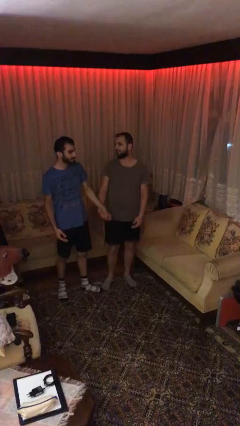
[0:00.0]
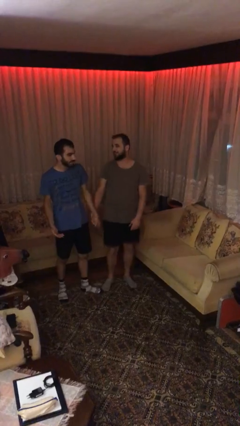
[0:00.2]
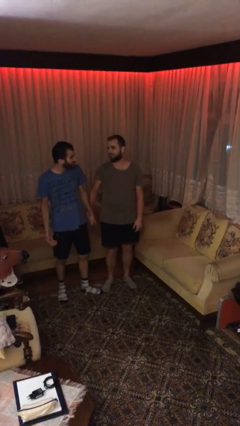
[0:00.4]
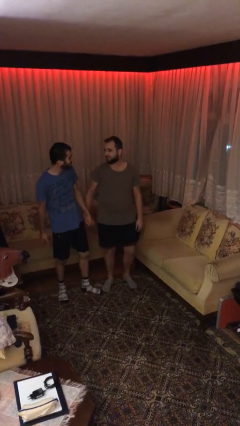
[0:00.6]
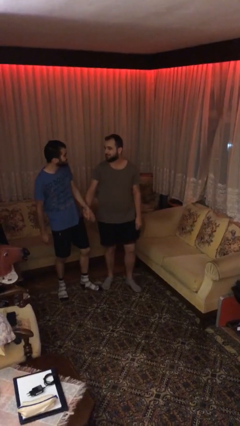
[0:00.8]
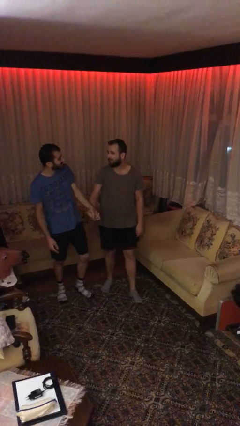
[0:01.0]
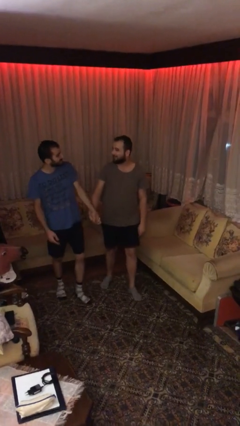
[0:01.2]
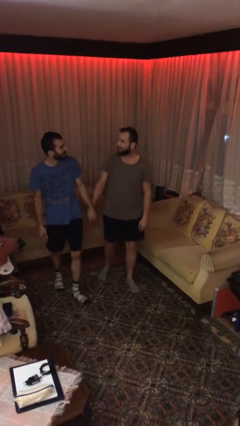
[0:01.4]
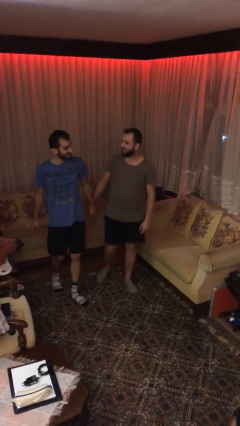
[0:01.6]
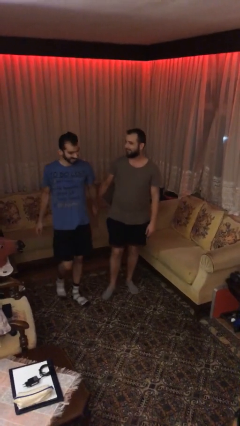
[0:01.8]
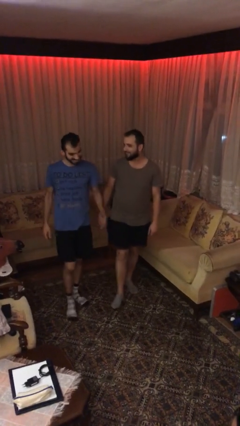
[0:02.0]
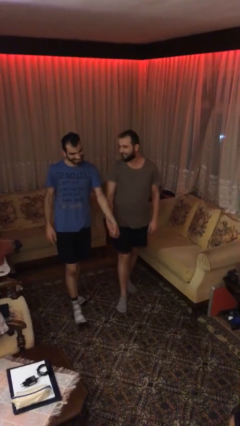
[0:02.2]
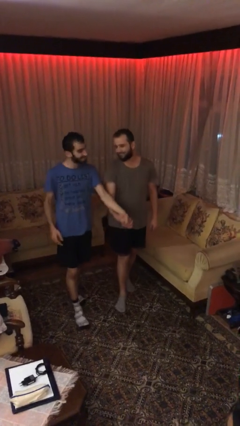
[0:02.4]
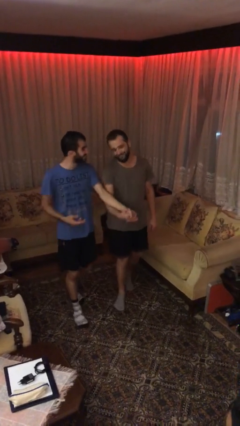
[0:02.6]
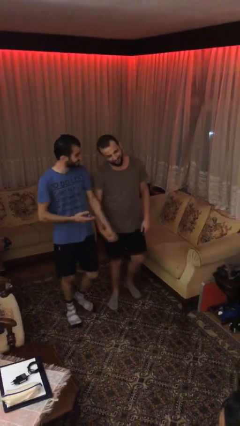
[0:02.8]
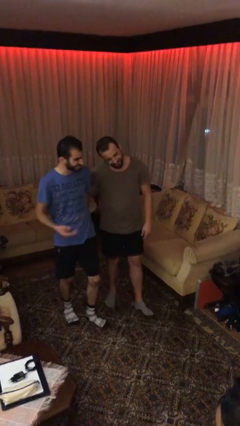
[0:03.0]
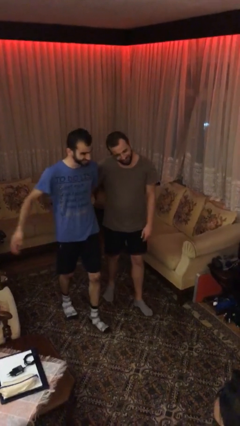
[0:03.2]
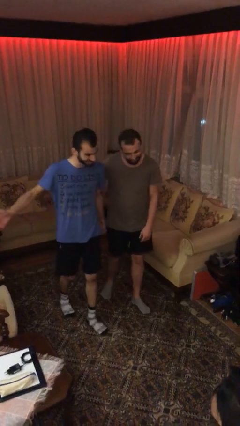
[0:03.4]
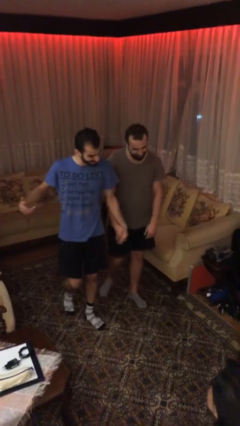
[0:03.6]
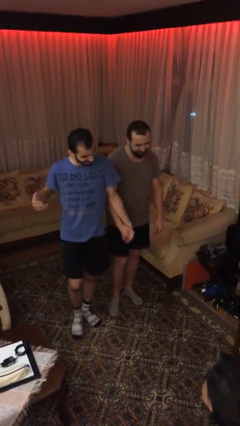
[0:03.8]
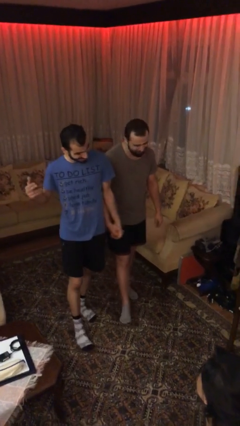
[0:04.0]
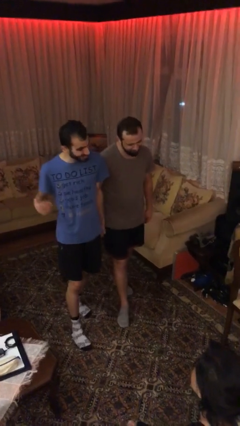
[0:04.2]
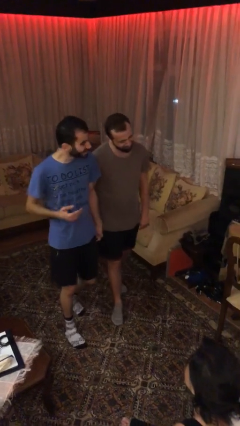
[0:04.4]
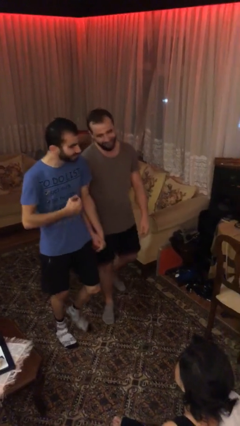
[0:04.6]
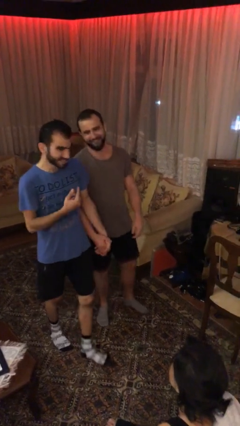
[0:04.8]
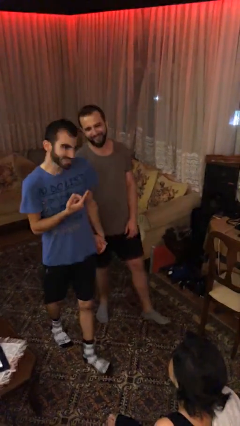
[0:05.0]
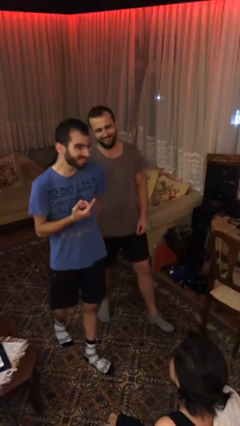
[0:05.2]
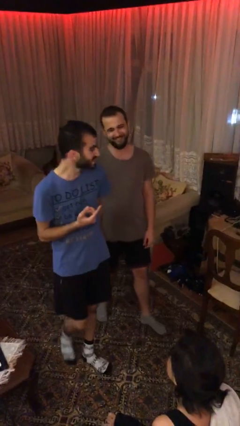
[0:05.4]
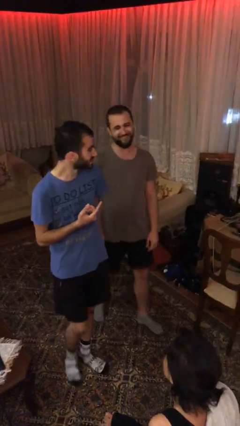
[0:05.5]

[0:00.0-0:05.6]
person holds hand

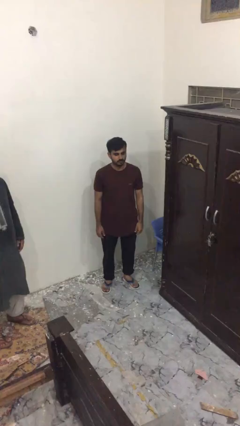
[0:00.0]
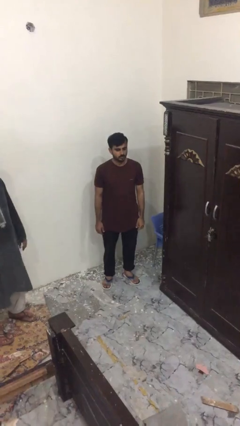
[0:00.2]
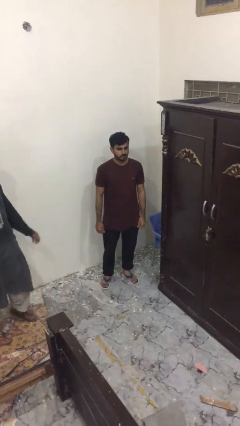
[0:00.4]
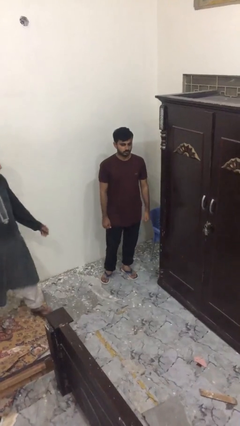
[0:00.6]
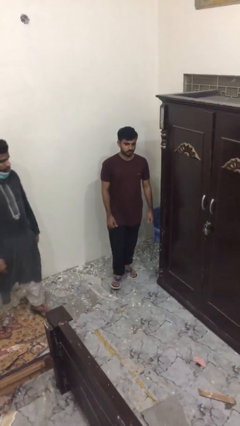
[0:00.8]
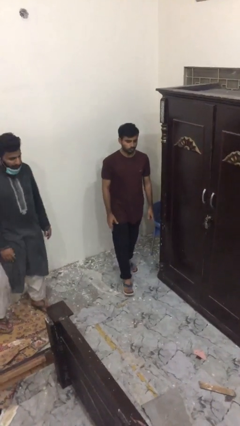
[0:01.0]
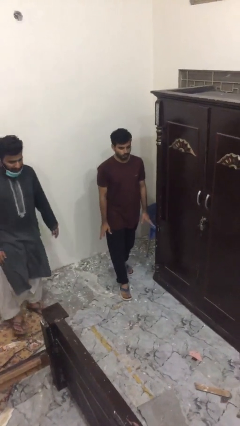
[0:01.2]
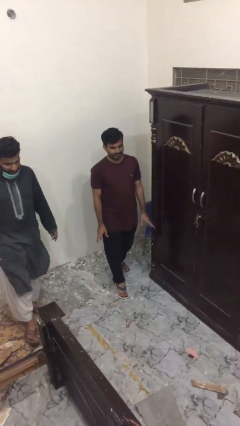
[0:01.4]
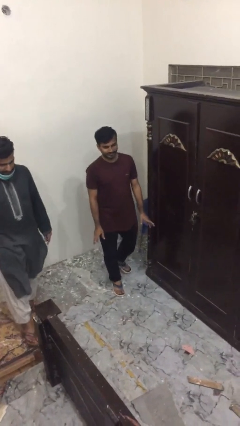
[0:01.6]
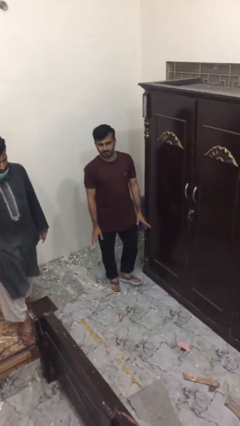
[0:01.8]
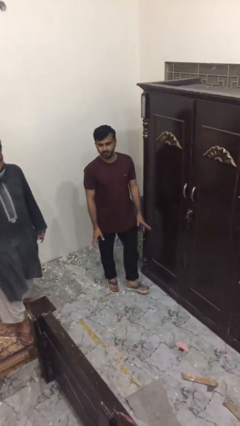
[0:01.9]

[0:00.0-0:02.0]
person talks to person

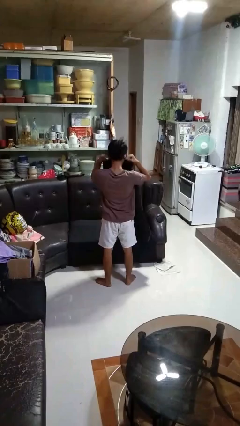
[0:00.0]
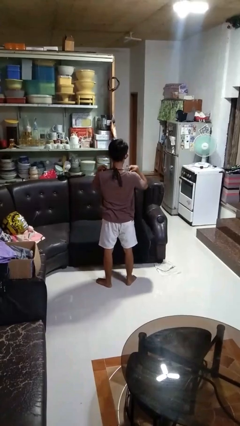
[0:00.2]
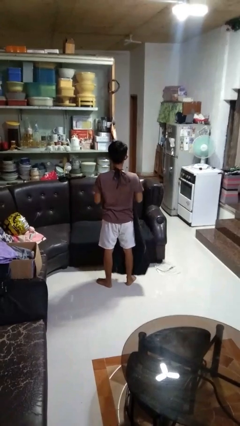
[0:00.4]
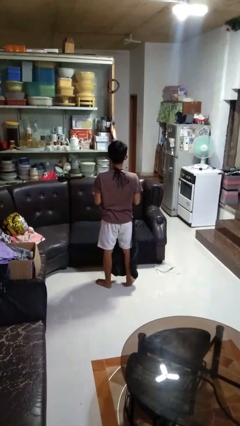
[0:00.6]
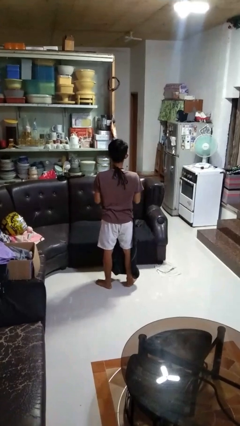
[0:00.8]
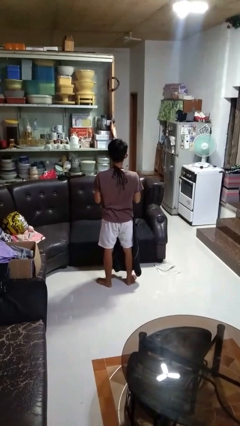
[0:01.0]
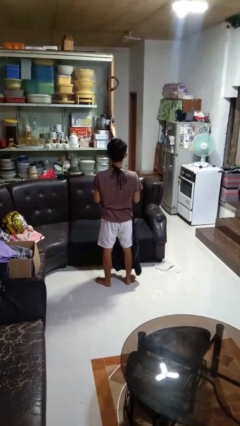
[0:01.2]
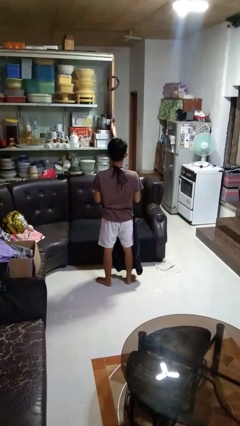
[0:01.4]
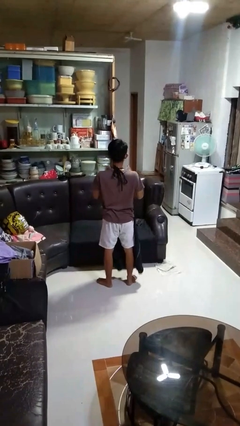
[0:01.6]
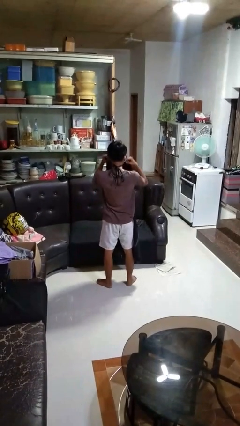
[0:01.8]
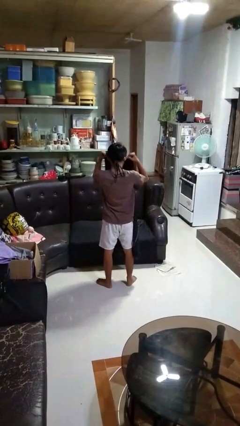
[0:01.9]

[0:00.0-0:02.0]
person puts on apron

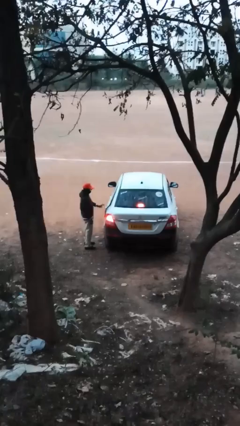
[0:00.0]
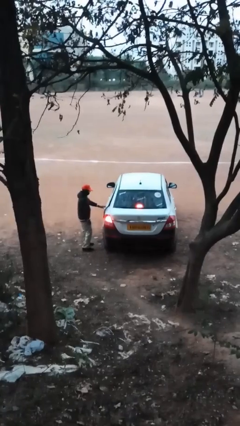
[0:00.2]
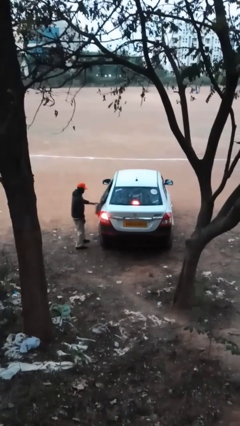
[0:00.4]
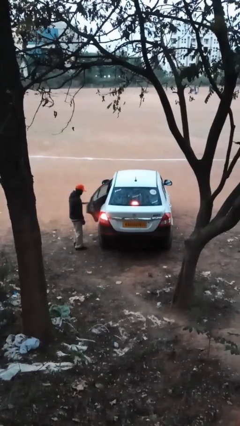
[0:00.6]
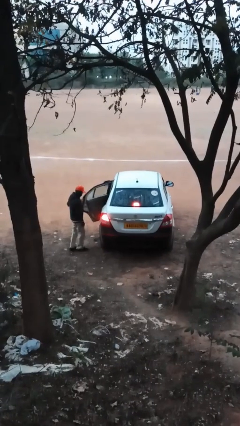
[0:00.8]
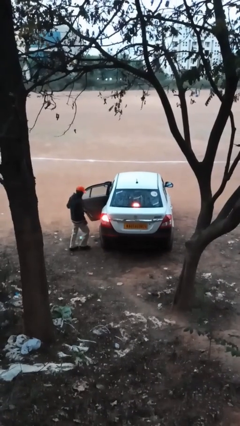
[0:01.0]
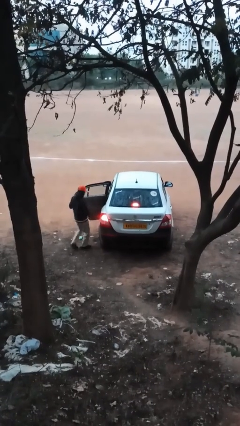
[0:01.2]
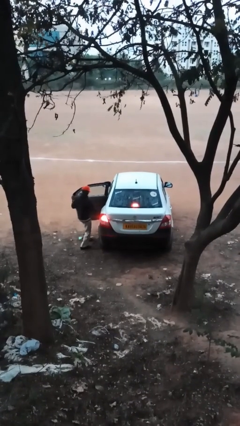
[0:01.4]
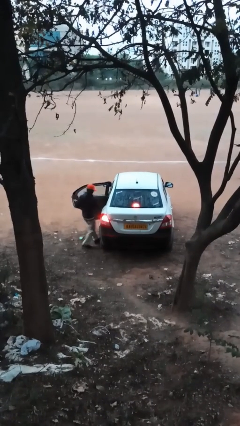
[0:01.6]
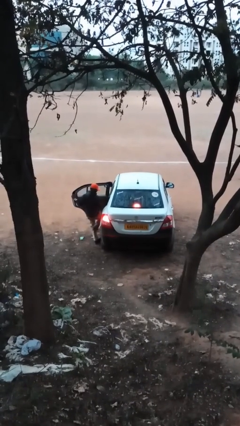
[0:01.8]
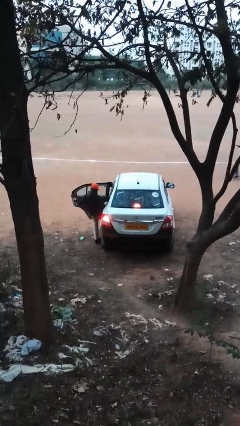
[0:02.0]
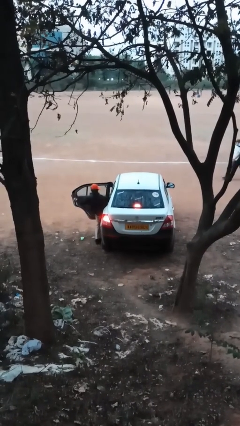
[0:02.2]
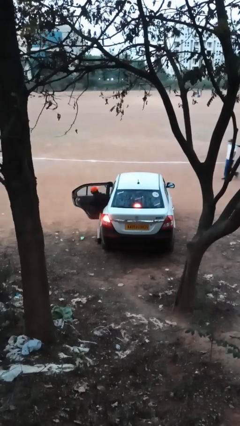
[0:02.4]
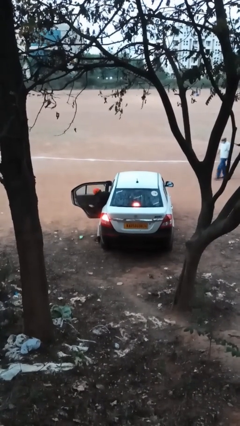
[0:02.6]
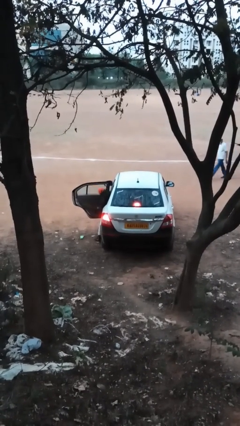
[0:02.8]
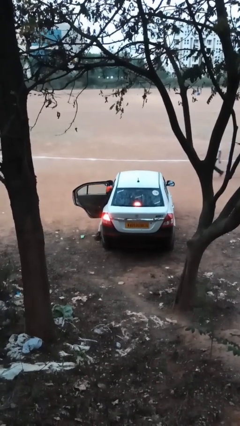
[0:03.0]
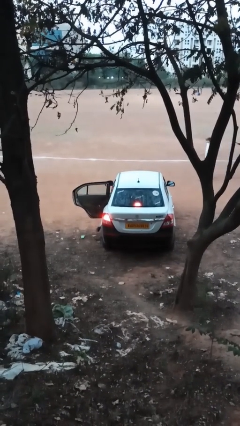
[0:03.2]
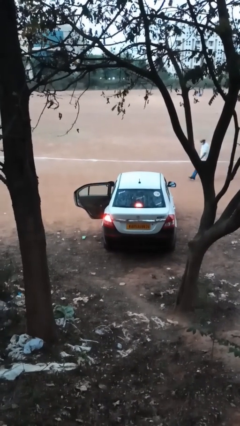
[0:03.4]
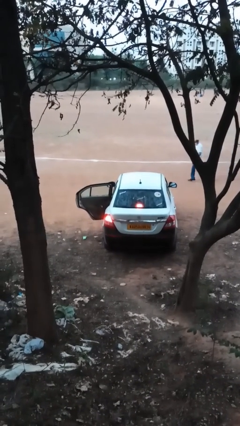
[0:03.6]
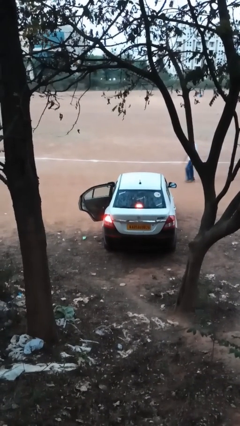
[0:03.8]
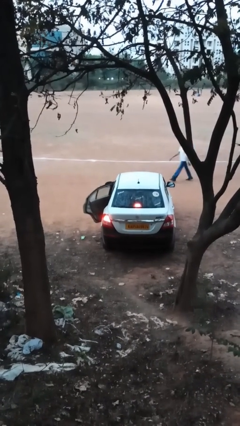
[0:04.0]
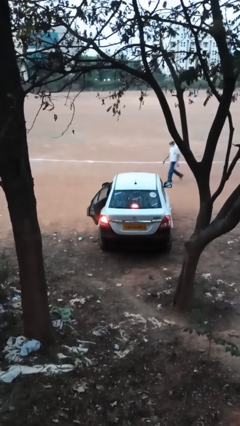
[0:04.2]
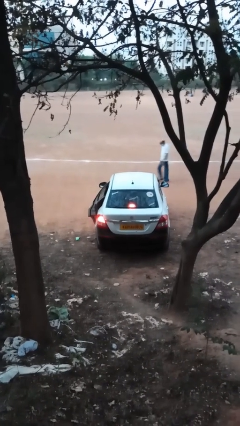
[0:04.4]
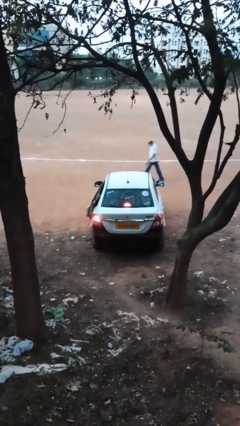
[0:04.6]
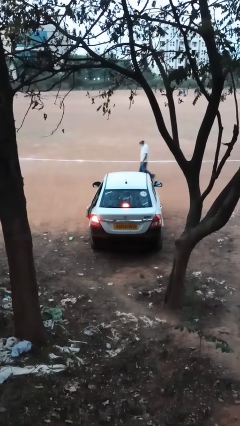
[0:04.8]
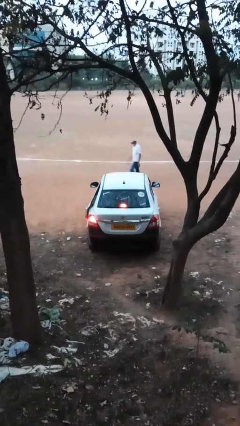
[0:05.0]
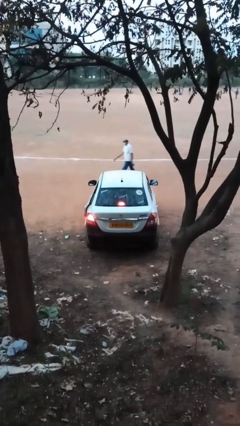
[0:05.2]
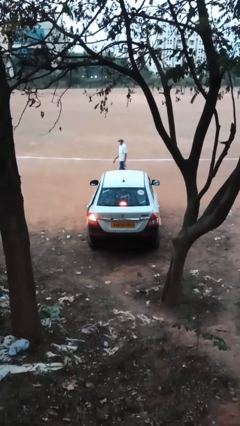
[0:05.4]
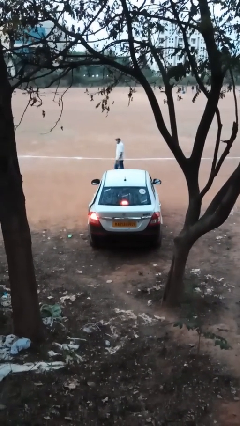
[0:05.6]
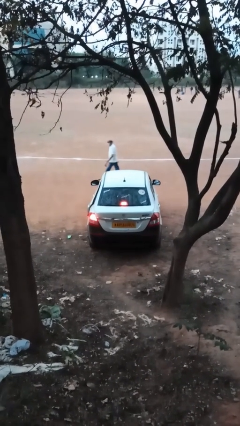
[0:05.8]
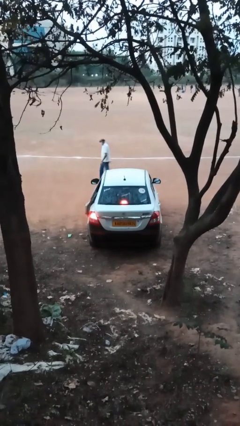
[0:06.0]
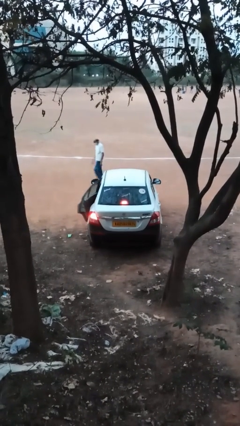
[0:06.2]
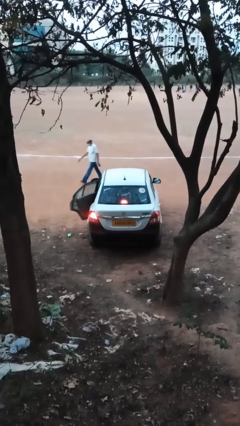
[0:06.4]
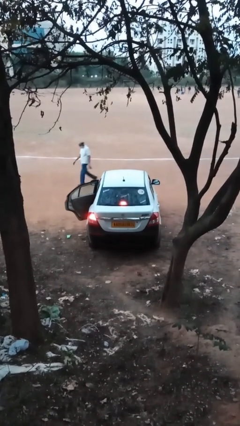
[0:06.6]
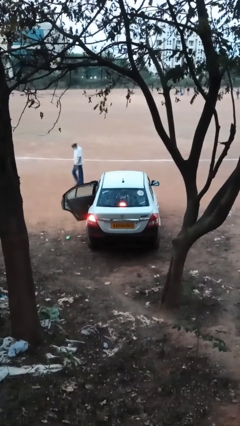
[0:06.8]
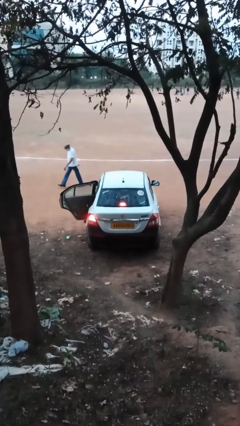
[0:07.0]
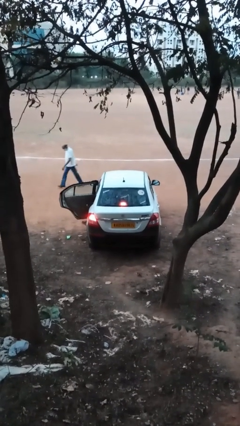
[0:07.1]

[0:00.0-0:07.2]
car picks up person

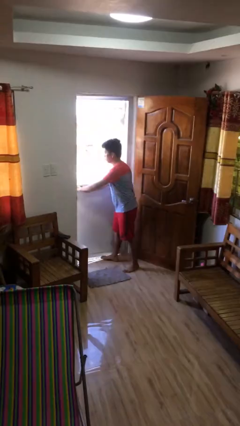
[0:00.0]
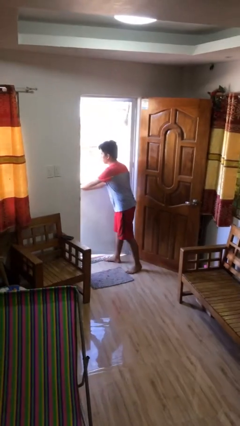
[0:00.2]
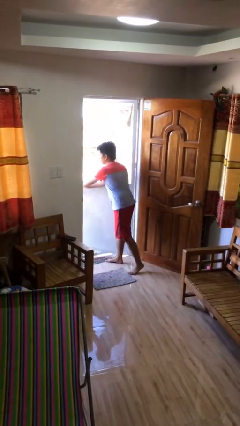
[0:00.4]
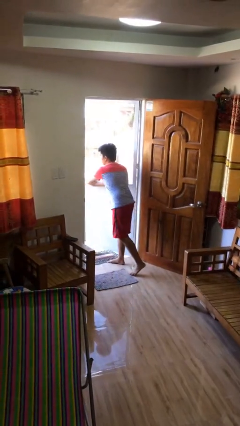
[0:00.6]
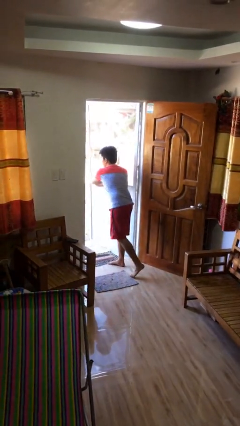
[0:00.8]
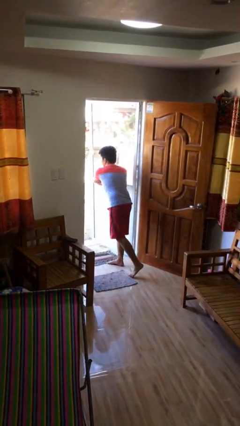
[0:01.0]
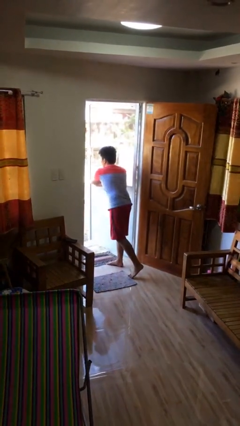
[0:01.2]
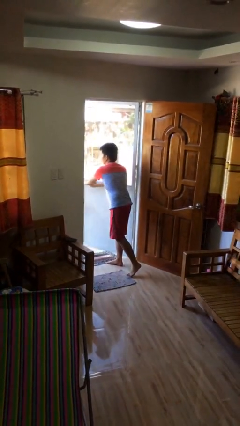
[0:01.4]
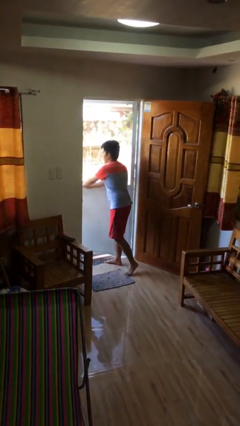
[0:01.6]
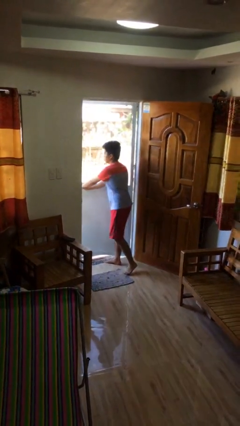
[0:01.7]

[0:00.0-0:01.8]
person opens facility door
